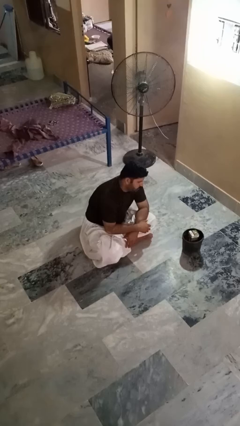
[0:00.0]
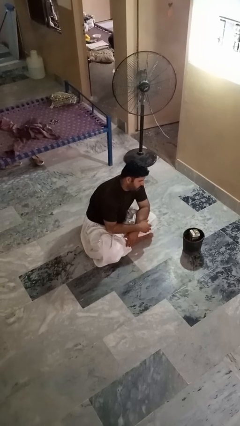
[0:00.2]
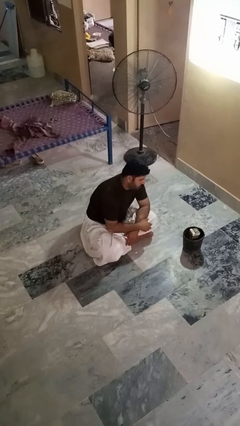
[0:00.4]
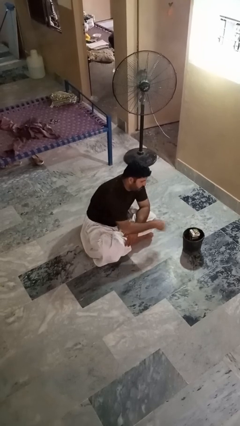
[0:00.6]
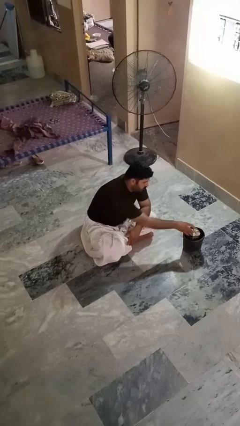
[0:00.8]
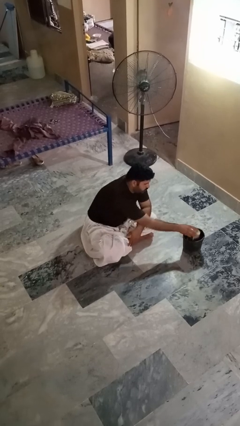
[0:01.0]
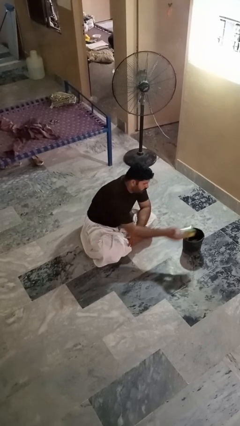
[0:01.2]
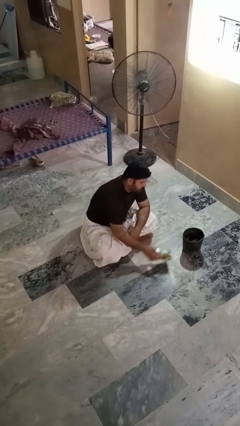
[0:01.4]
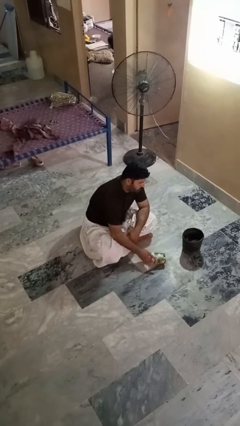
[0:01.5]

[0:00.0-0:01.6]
person takes object from basket

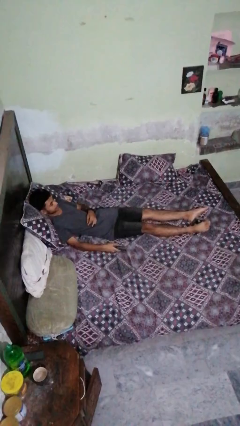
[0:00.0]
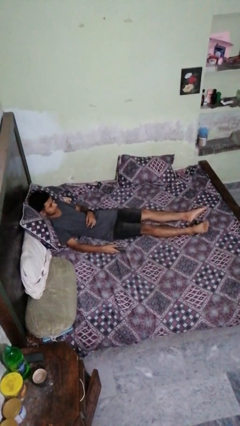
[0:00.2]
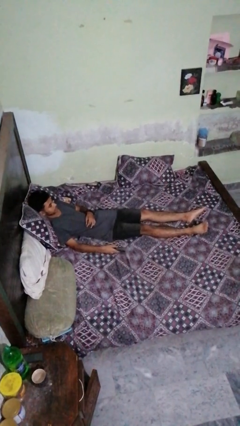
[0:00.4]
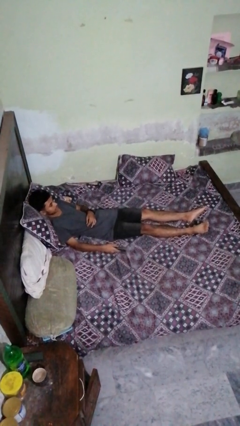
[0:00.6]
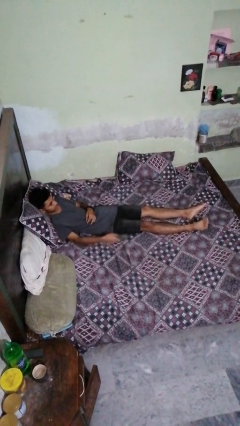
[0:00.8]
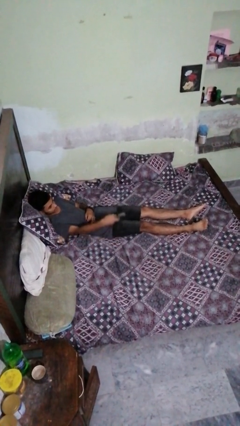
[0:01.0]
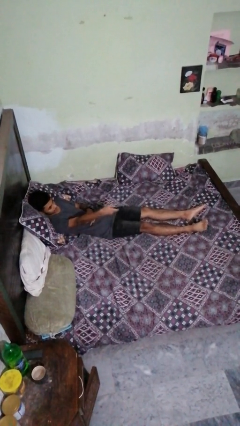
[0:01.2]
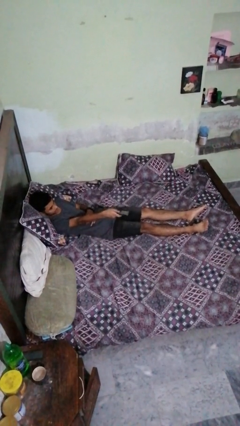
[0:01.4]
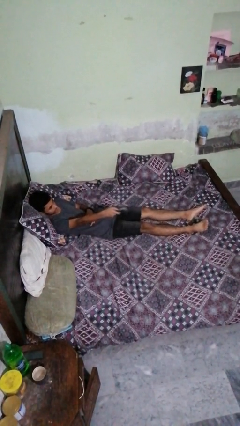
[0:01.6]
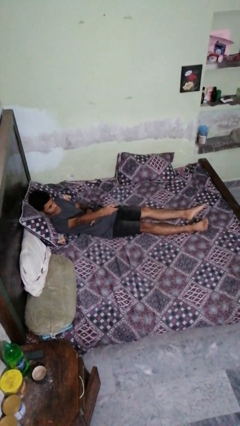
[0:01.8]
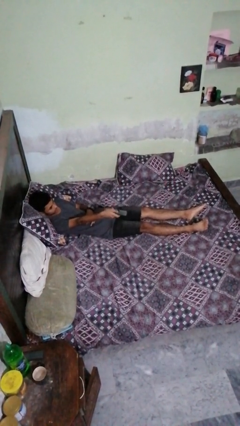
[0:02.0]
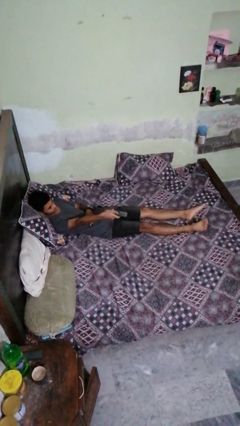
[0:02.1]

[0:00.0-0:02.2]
person uses television remote

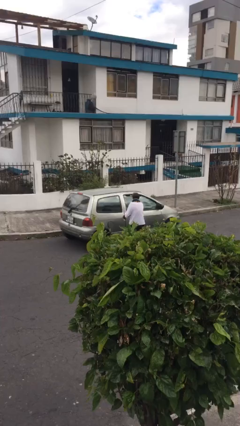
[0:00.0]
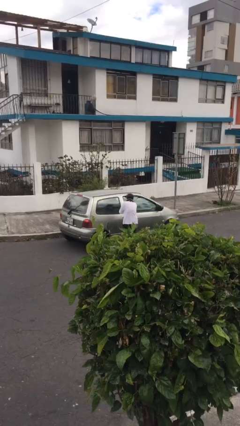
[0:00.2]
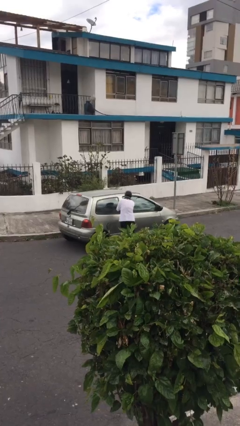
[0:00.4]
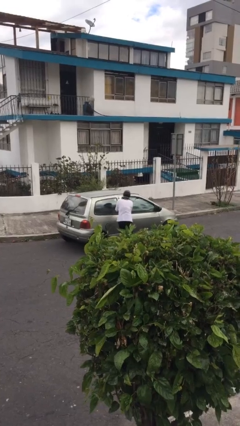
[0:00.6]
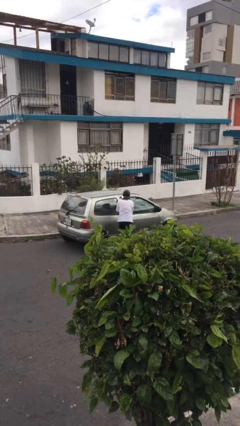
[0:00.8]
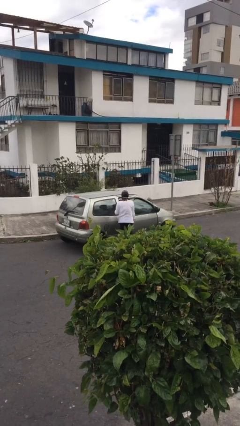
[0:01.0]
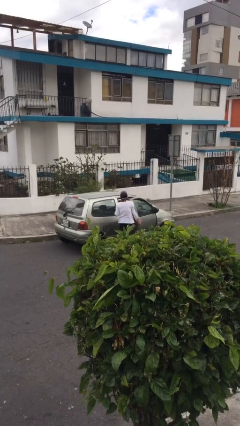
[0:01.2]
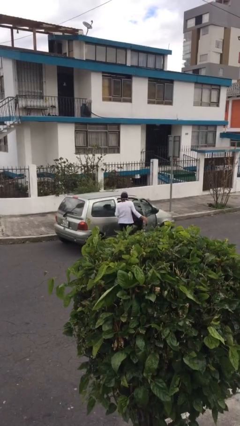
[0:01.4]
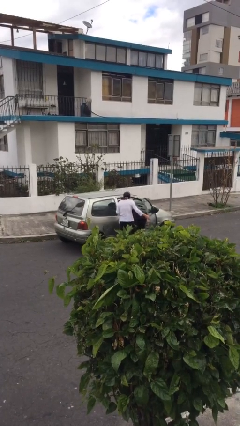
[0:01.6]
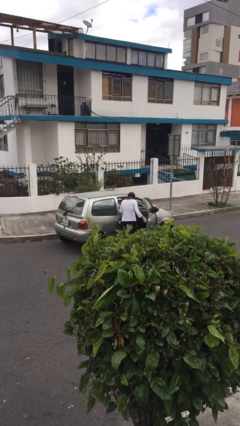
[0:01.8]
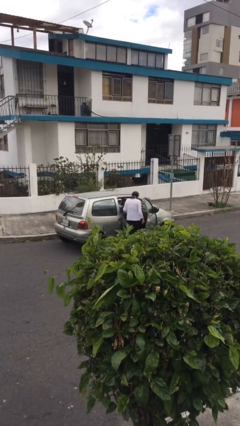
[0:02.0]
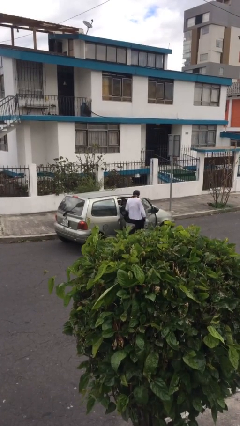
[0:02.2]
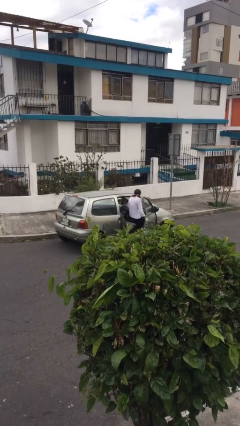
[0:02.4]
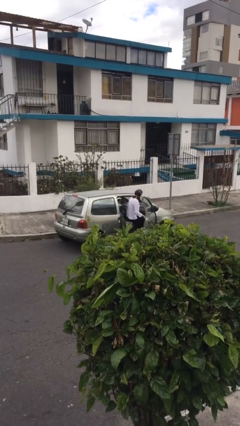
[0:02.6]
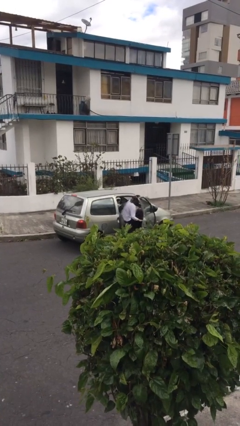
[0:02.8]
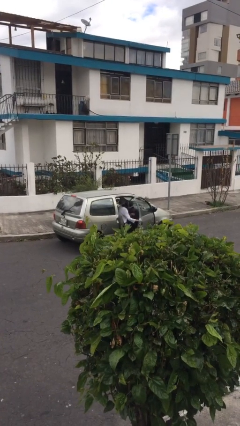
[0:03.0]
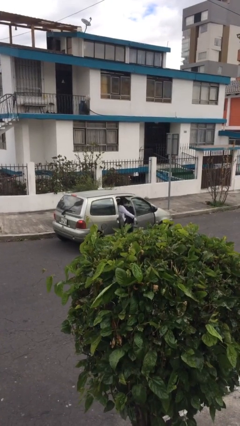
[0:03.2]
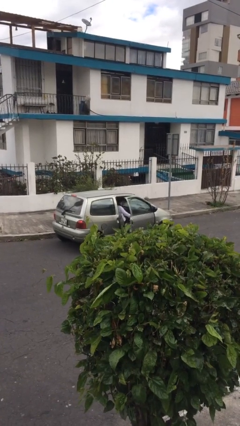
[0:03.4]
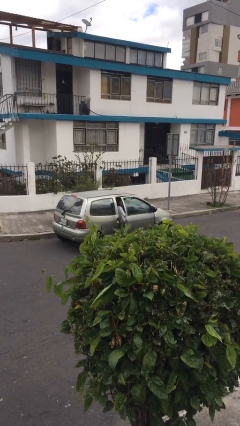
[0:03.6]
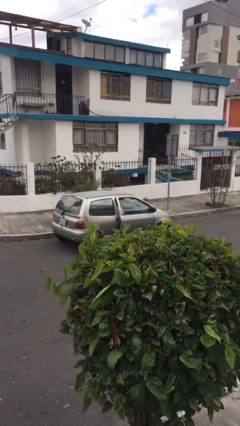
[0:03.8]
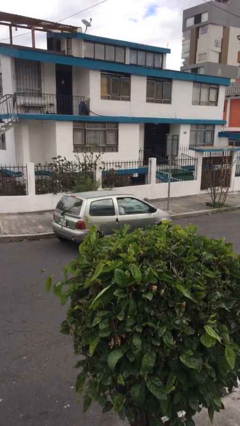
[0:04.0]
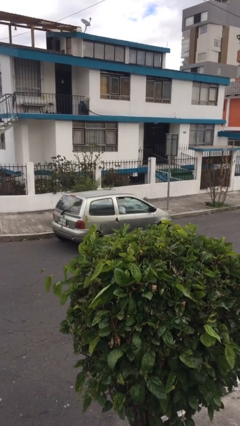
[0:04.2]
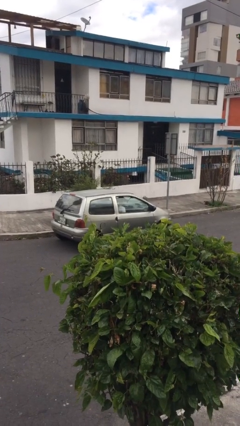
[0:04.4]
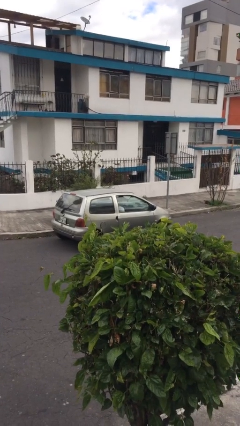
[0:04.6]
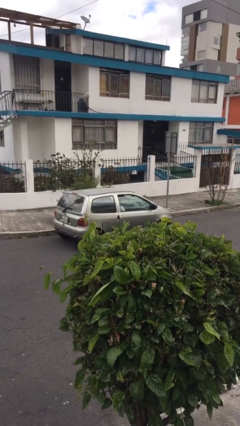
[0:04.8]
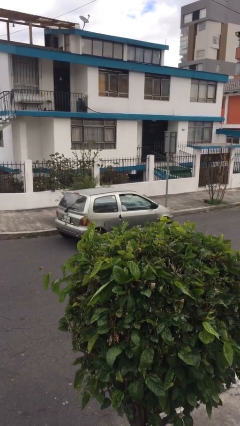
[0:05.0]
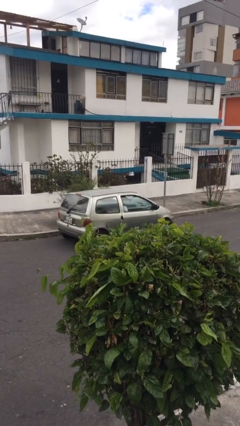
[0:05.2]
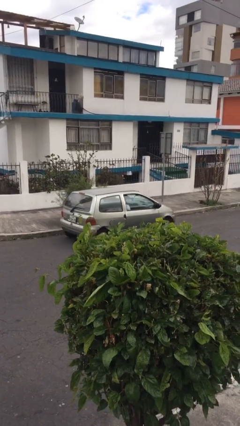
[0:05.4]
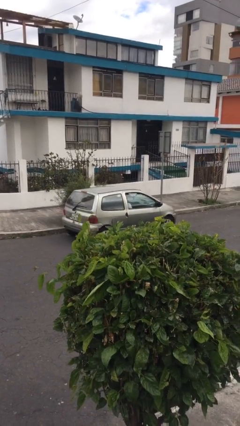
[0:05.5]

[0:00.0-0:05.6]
car picks up person

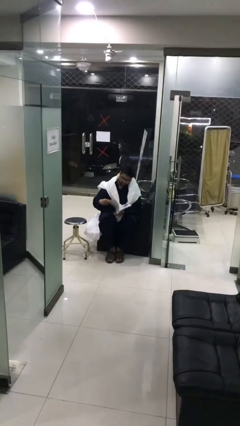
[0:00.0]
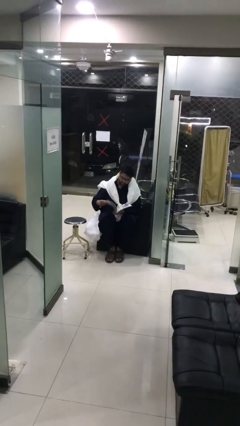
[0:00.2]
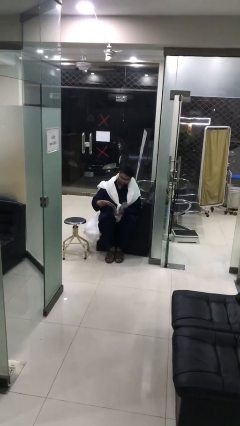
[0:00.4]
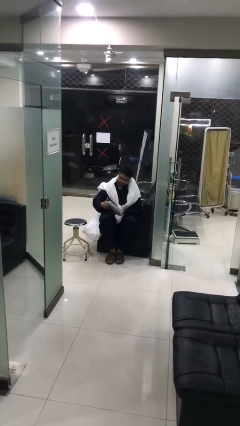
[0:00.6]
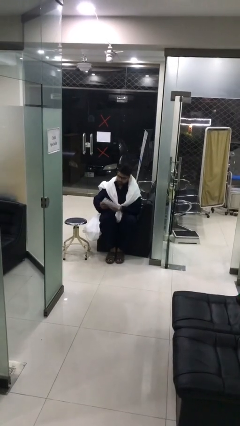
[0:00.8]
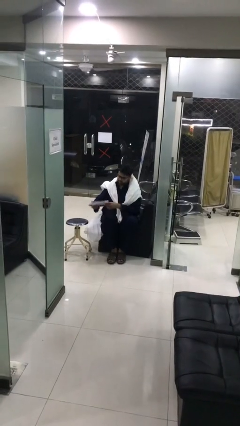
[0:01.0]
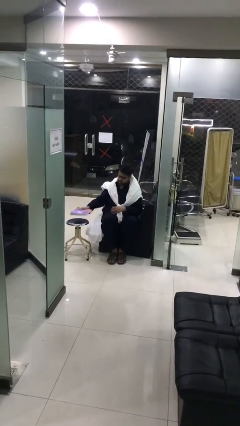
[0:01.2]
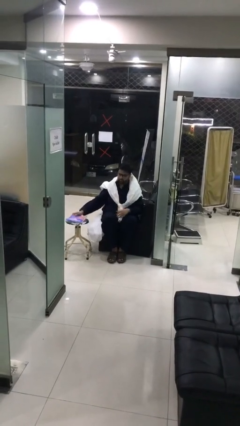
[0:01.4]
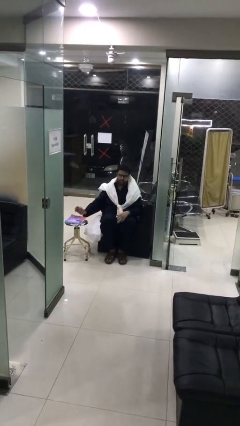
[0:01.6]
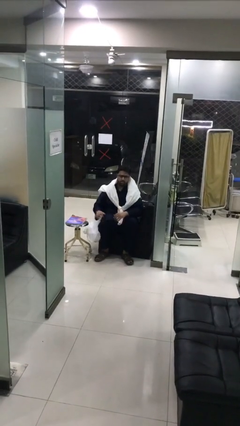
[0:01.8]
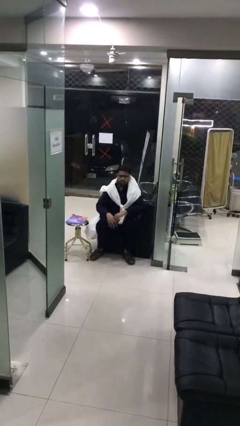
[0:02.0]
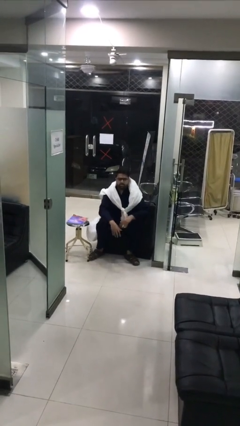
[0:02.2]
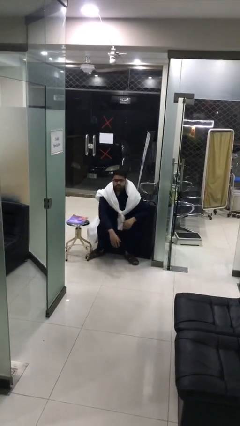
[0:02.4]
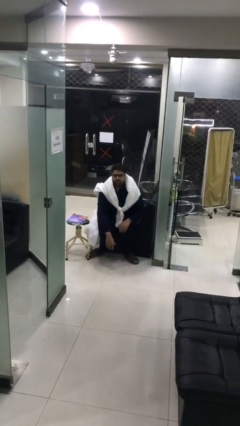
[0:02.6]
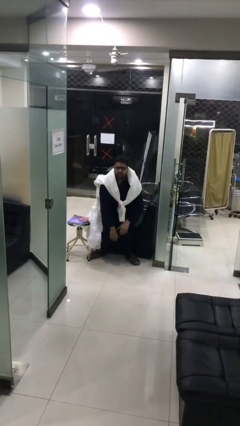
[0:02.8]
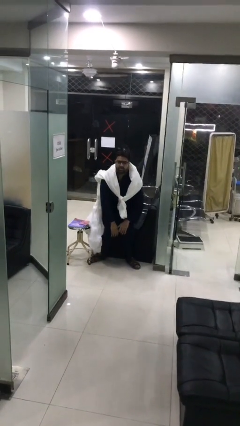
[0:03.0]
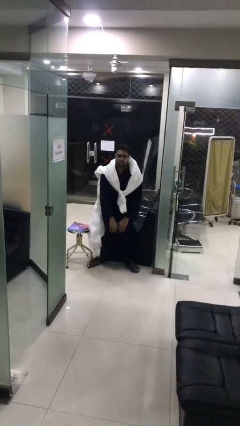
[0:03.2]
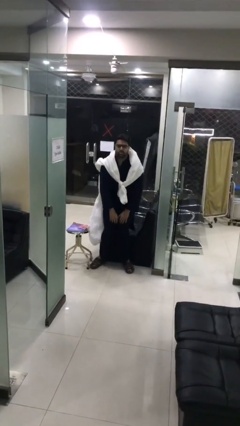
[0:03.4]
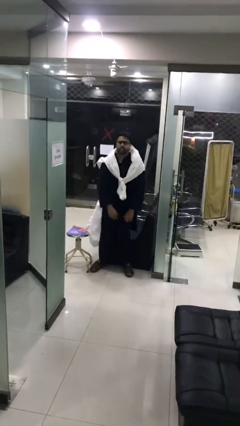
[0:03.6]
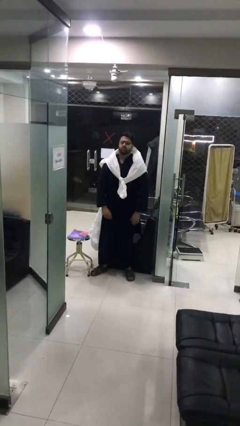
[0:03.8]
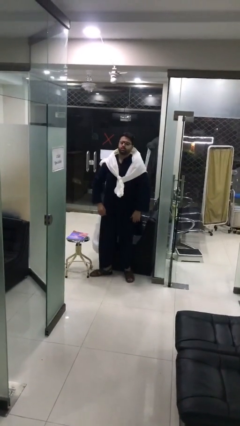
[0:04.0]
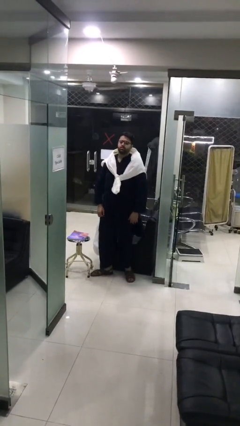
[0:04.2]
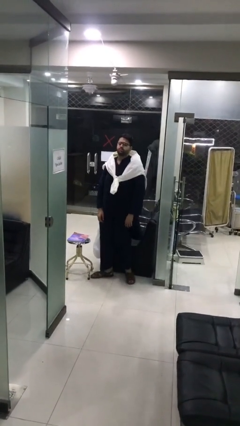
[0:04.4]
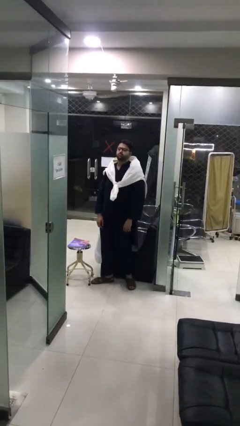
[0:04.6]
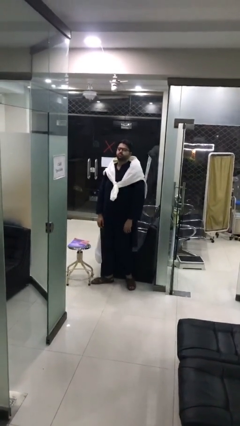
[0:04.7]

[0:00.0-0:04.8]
person stands up

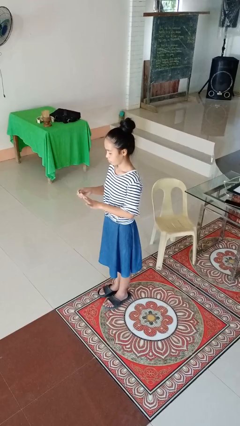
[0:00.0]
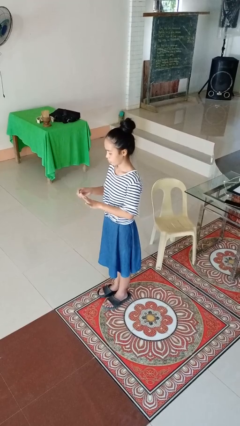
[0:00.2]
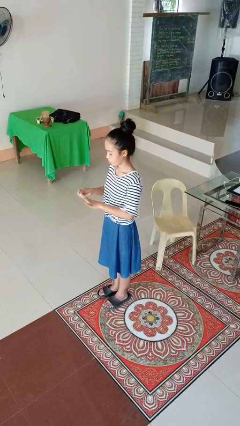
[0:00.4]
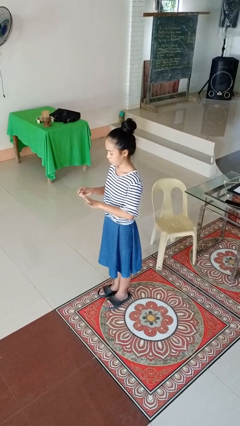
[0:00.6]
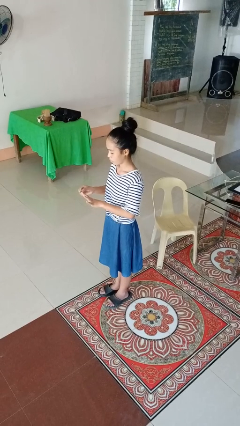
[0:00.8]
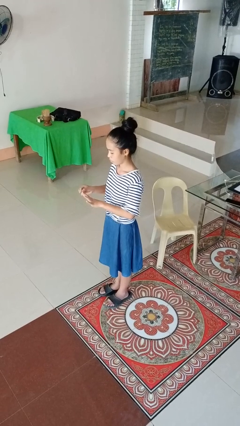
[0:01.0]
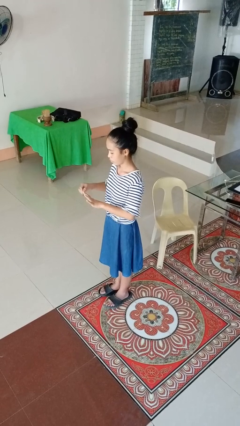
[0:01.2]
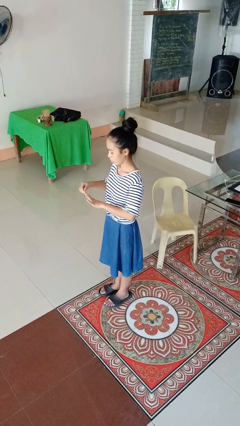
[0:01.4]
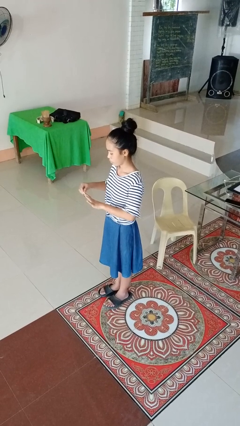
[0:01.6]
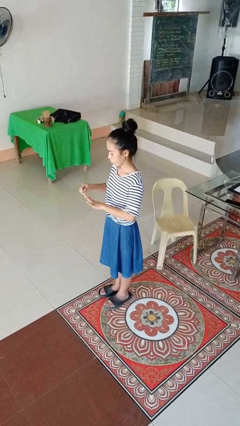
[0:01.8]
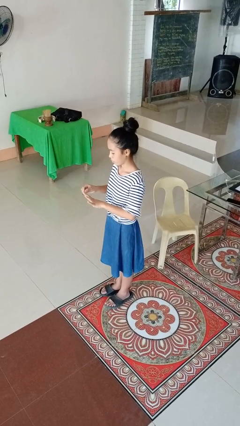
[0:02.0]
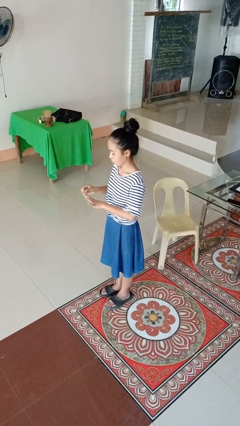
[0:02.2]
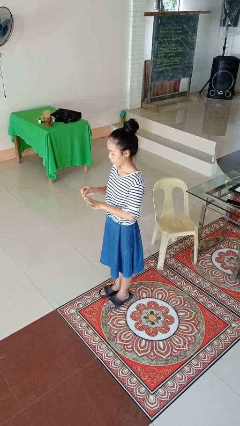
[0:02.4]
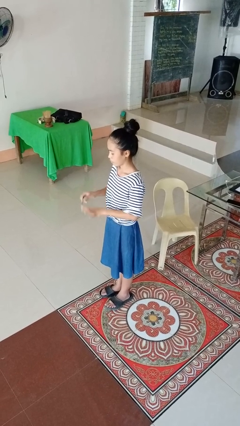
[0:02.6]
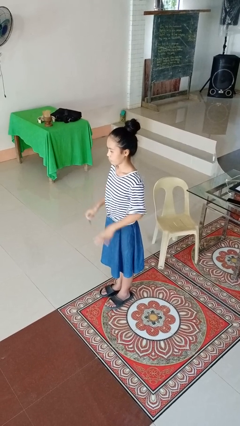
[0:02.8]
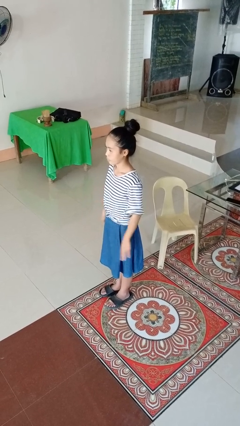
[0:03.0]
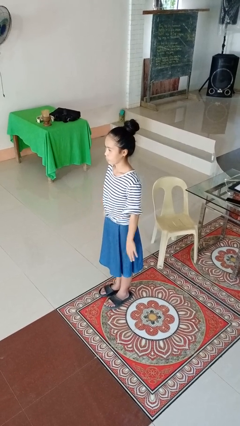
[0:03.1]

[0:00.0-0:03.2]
person files fingernails

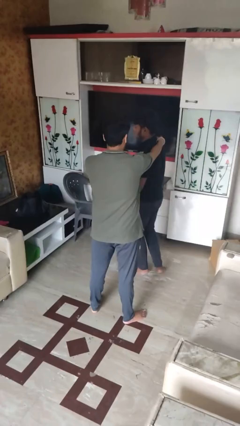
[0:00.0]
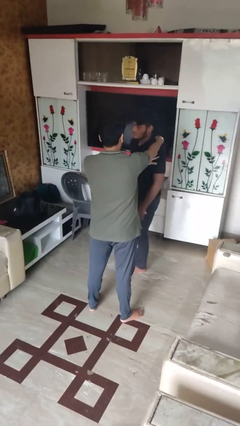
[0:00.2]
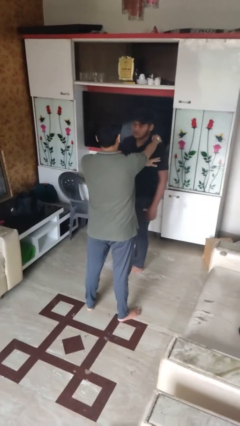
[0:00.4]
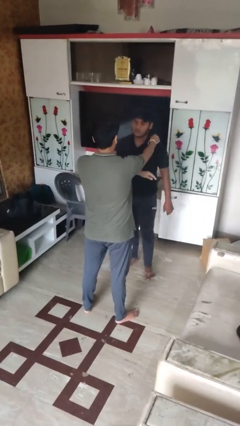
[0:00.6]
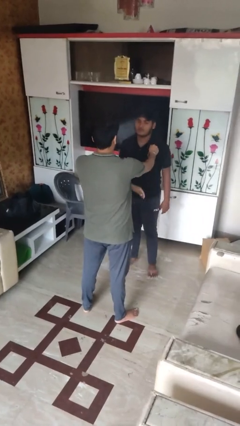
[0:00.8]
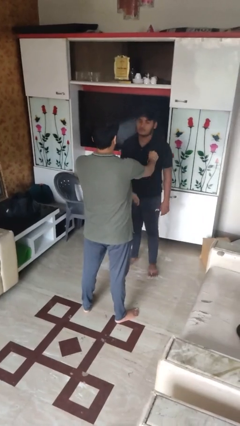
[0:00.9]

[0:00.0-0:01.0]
person spins person around
